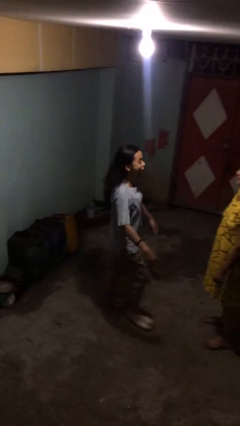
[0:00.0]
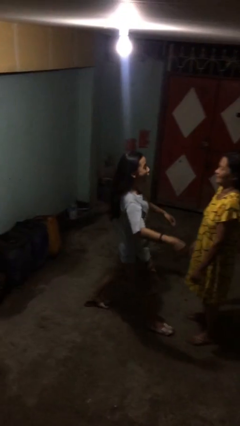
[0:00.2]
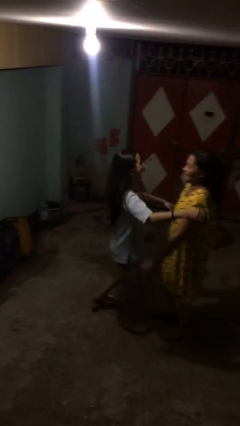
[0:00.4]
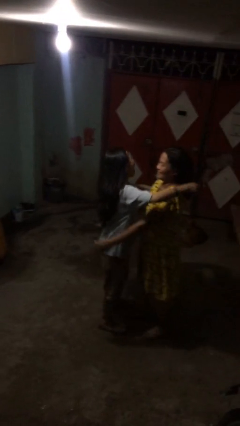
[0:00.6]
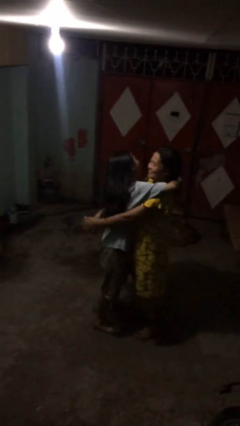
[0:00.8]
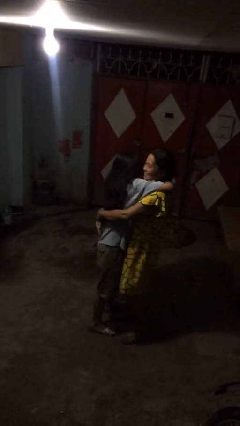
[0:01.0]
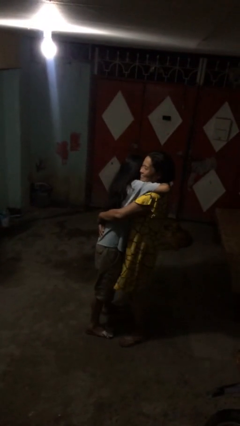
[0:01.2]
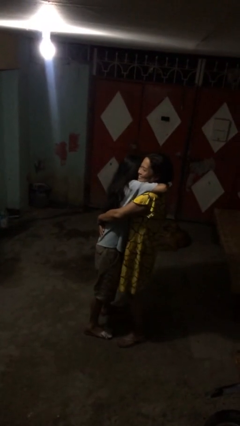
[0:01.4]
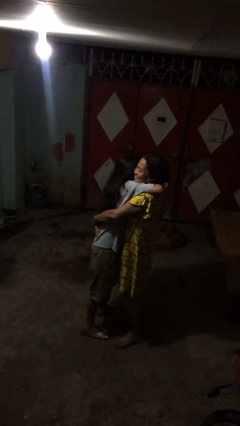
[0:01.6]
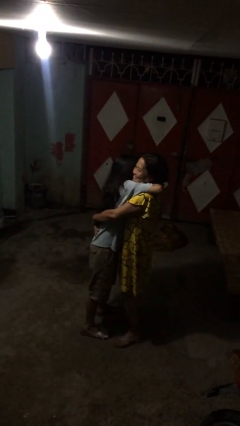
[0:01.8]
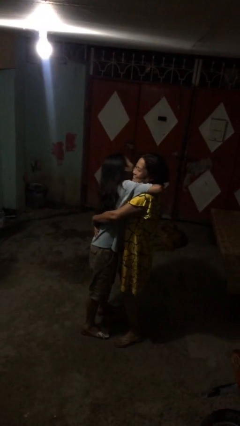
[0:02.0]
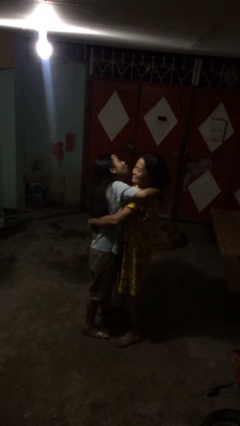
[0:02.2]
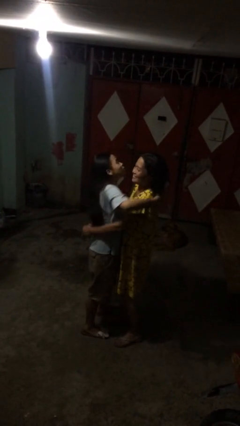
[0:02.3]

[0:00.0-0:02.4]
person embraces person

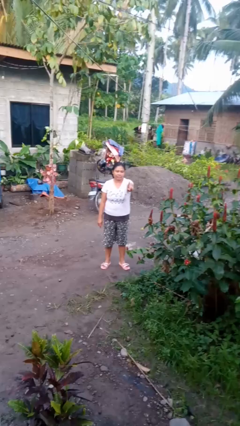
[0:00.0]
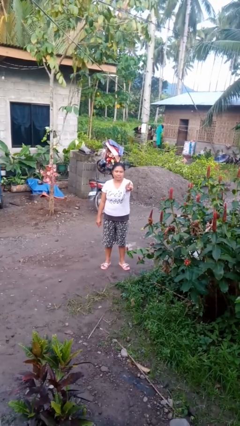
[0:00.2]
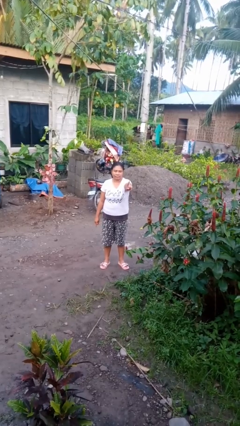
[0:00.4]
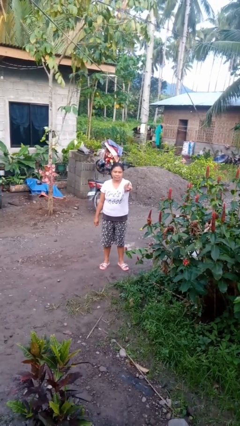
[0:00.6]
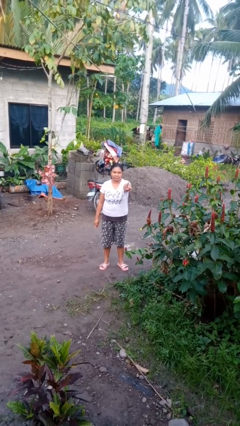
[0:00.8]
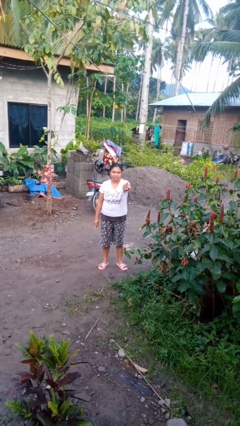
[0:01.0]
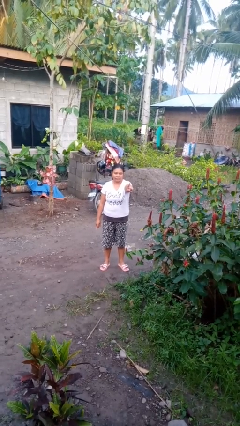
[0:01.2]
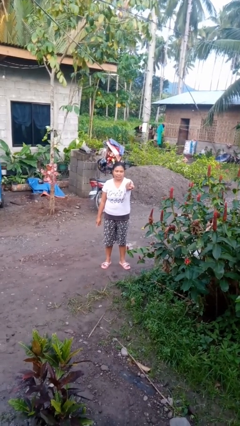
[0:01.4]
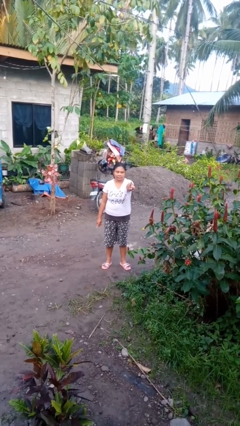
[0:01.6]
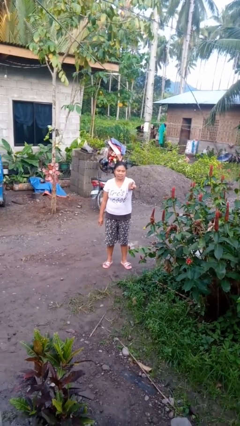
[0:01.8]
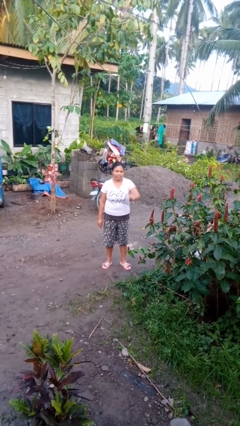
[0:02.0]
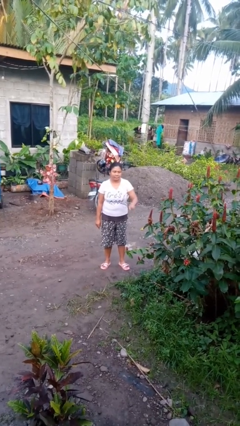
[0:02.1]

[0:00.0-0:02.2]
person gestures number one

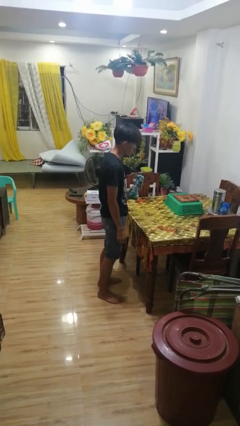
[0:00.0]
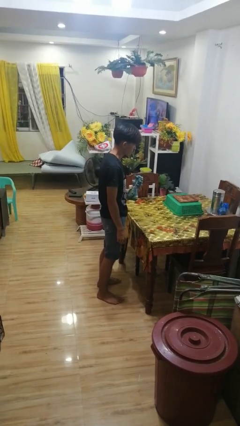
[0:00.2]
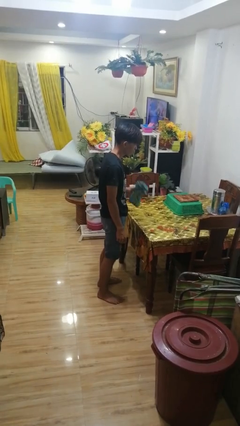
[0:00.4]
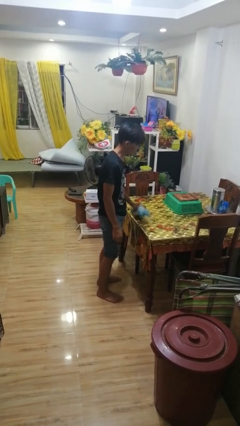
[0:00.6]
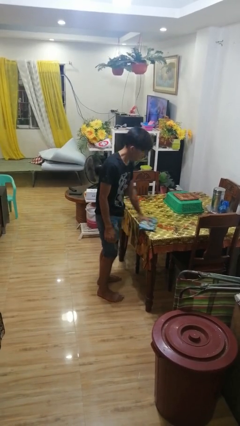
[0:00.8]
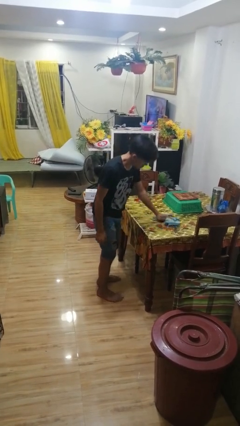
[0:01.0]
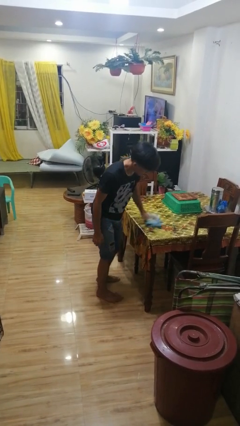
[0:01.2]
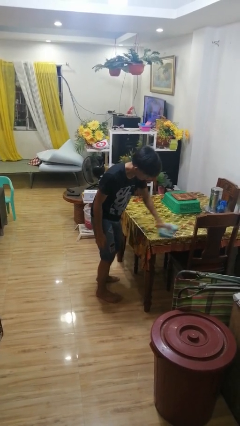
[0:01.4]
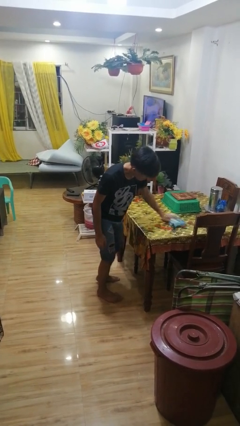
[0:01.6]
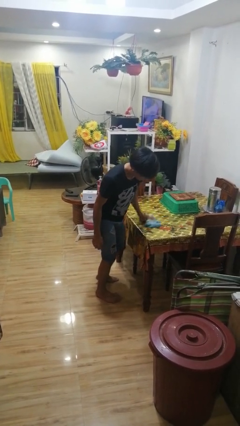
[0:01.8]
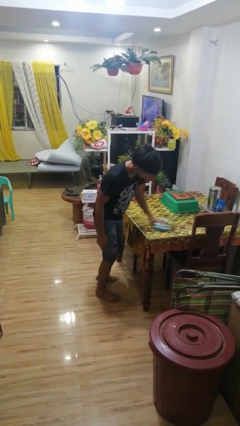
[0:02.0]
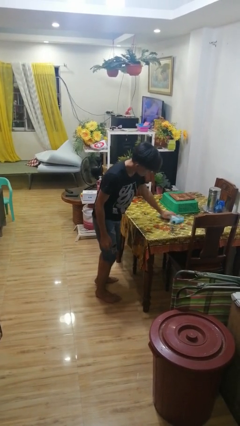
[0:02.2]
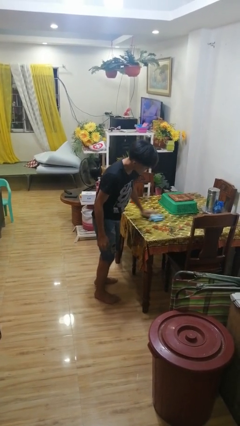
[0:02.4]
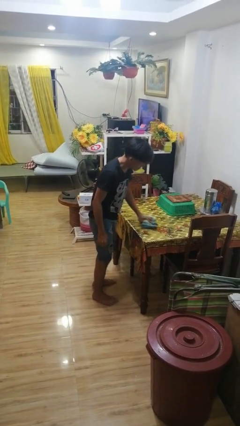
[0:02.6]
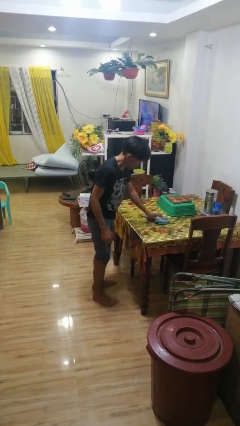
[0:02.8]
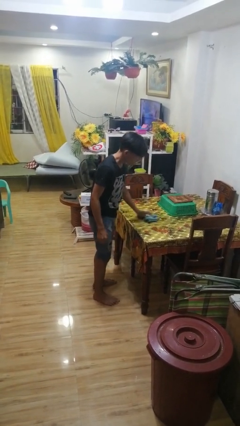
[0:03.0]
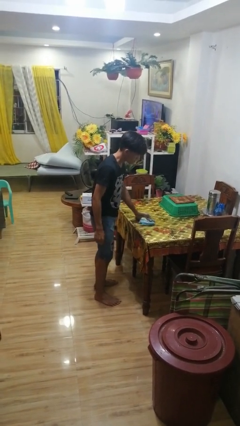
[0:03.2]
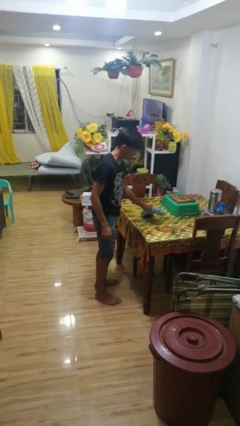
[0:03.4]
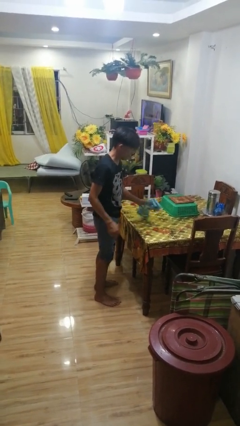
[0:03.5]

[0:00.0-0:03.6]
person cleans table with rag

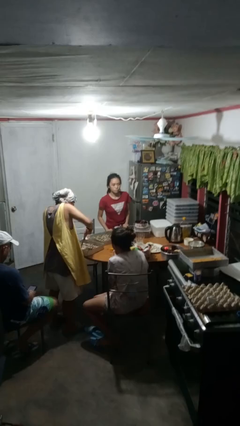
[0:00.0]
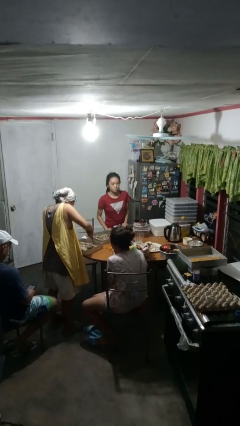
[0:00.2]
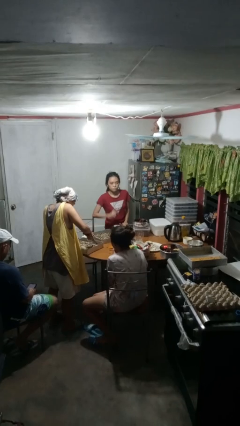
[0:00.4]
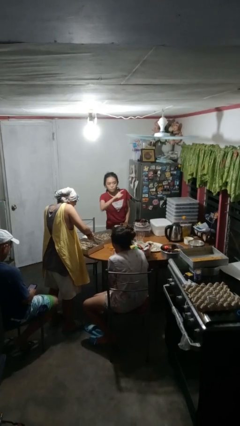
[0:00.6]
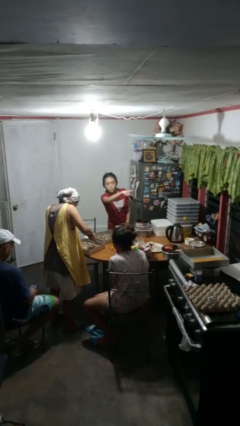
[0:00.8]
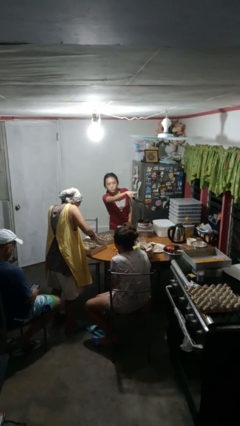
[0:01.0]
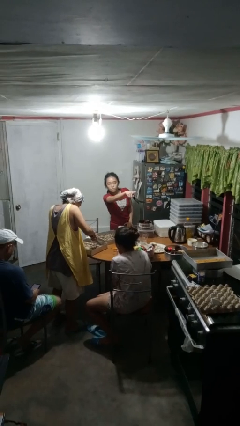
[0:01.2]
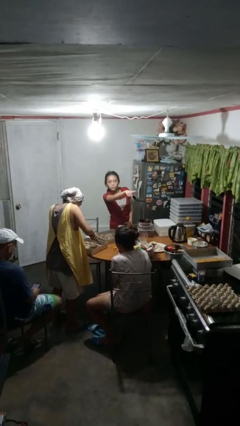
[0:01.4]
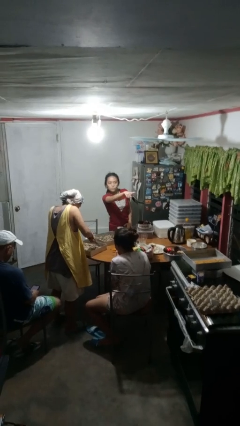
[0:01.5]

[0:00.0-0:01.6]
person points at person

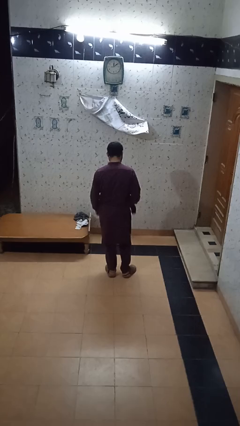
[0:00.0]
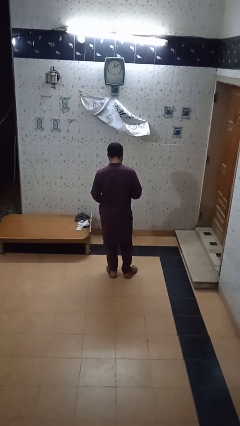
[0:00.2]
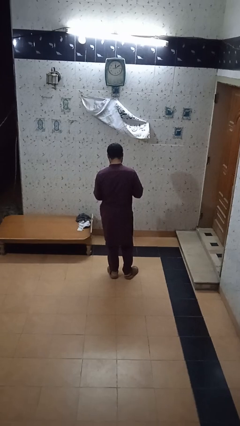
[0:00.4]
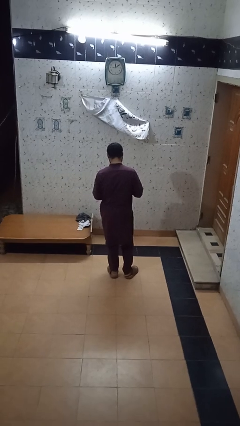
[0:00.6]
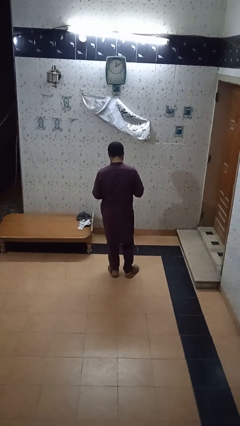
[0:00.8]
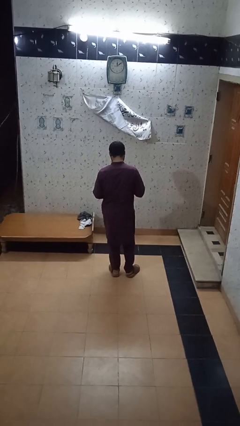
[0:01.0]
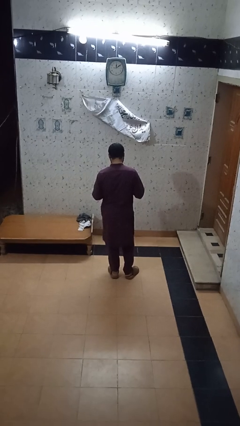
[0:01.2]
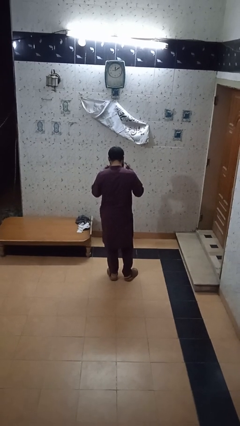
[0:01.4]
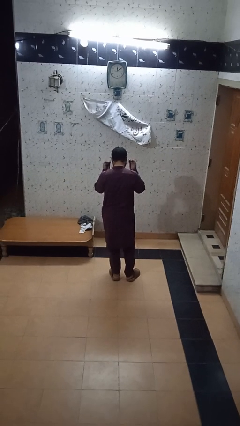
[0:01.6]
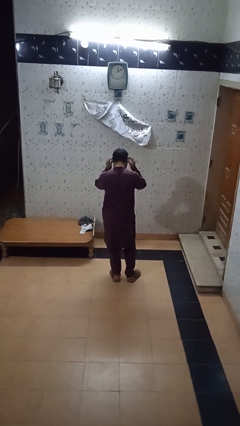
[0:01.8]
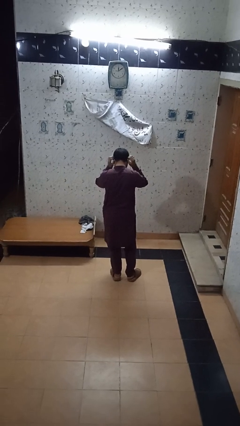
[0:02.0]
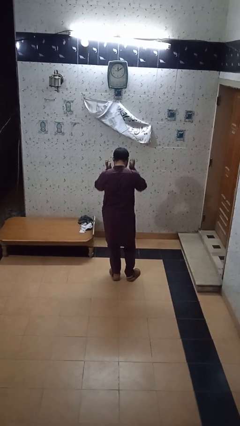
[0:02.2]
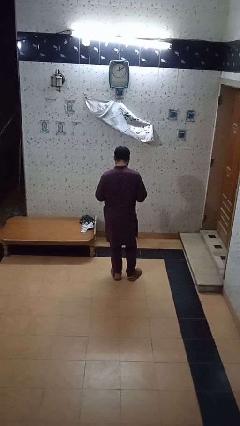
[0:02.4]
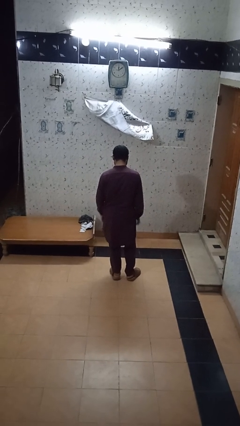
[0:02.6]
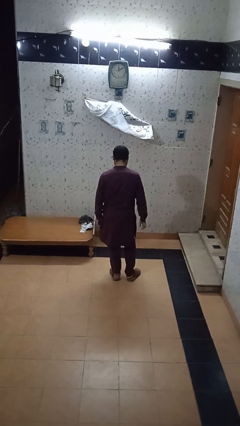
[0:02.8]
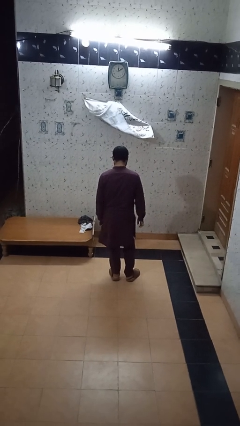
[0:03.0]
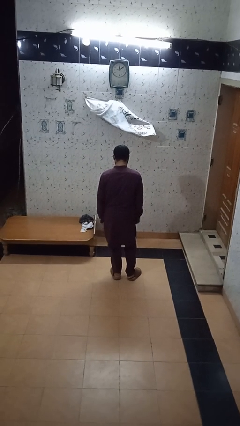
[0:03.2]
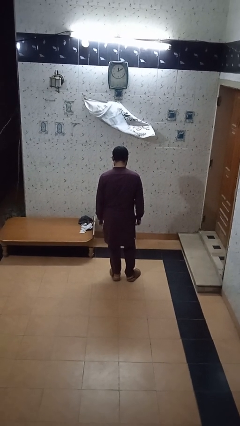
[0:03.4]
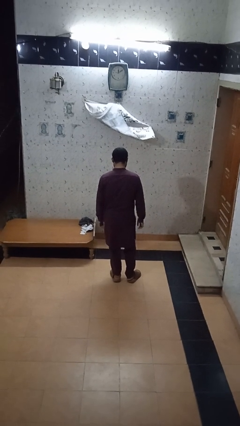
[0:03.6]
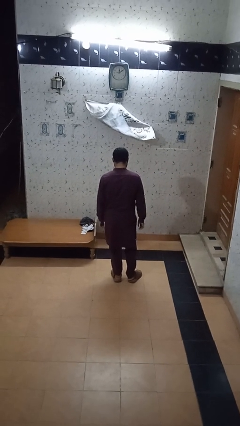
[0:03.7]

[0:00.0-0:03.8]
person puts on facemask

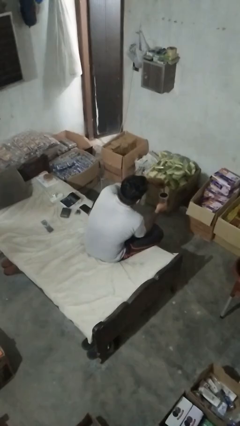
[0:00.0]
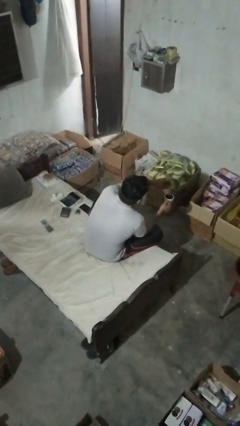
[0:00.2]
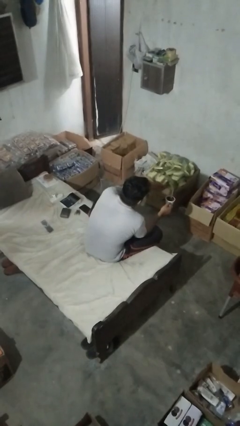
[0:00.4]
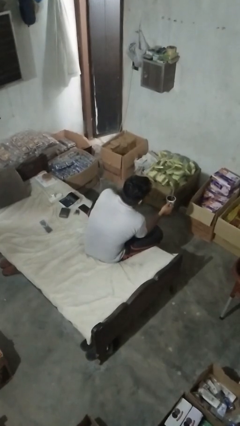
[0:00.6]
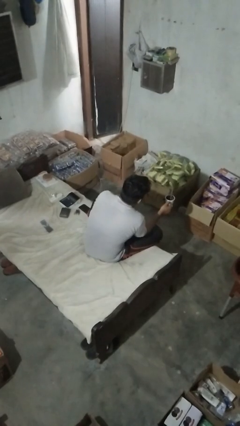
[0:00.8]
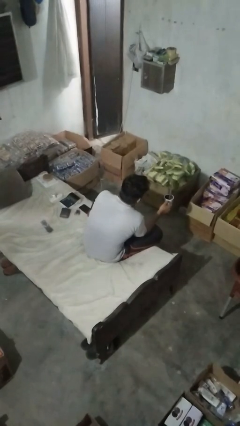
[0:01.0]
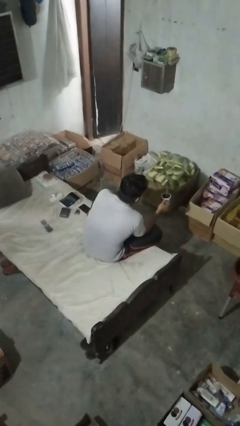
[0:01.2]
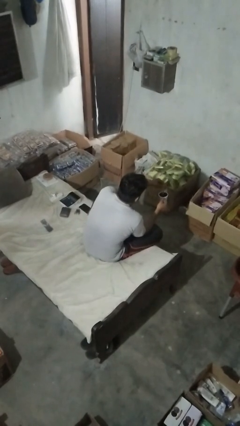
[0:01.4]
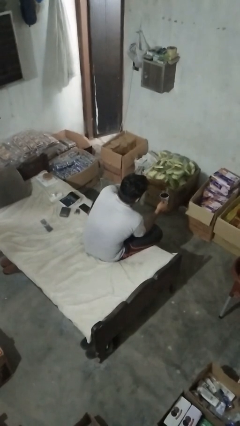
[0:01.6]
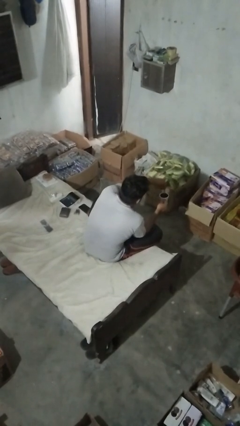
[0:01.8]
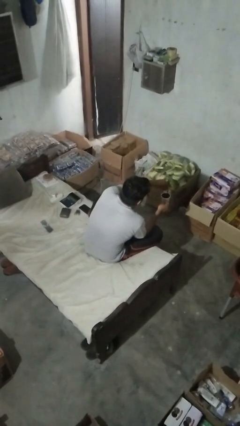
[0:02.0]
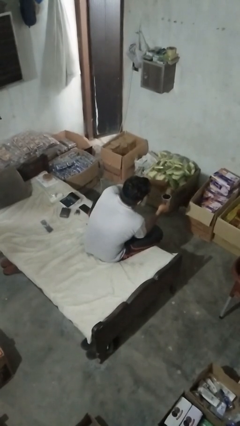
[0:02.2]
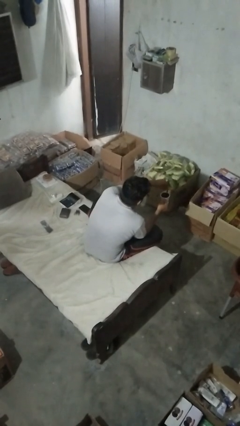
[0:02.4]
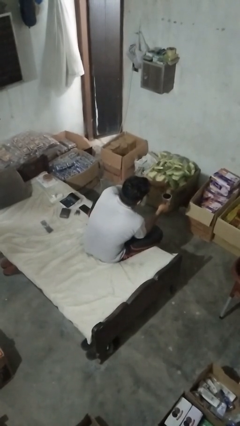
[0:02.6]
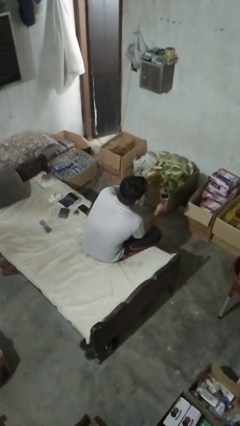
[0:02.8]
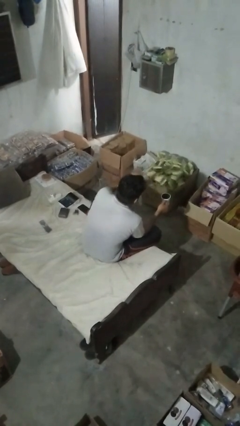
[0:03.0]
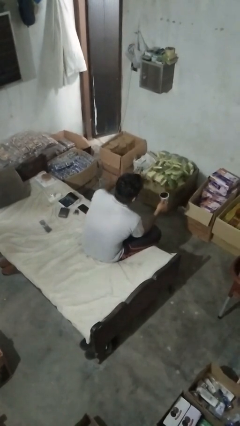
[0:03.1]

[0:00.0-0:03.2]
person stirs mug

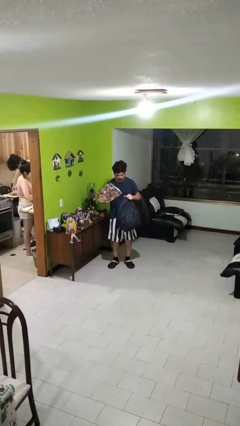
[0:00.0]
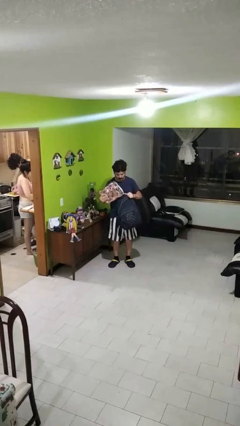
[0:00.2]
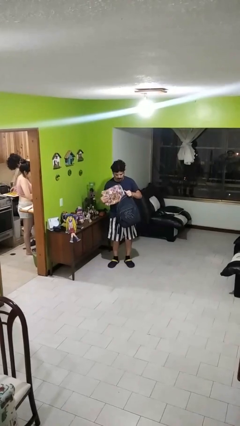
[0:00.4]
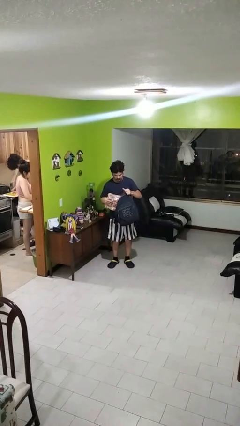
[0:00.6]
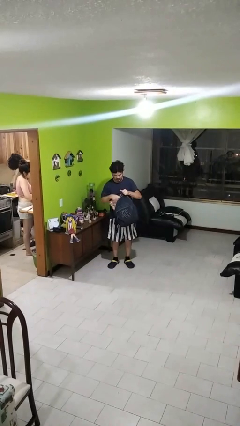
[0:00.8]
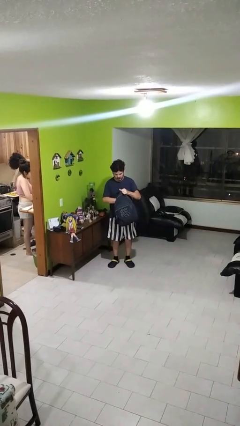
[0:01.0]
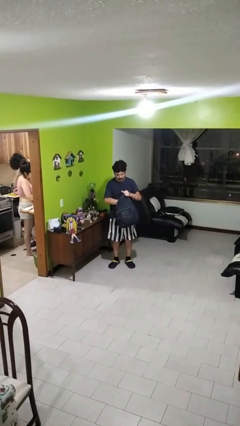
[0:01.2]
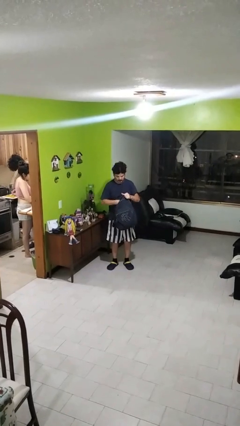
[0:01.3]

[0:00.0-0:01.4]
person puts object into purse
